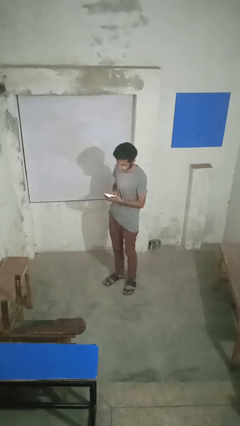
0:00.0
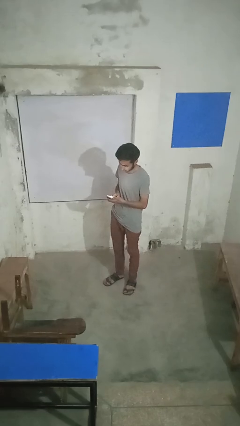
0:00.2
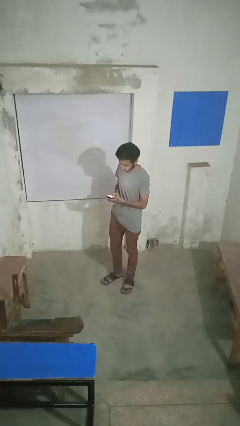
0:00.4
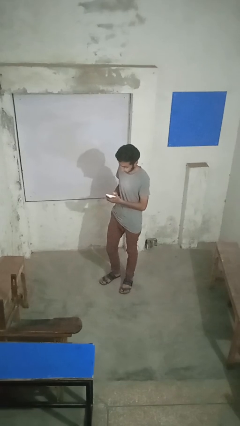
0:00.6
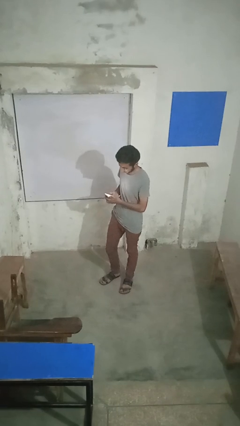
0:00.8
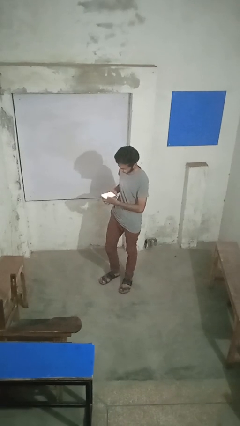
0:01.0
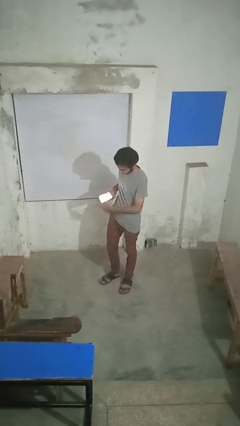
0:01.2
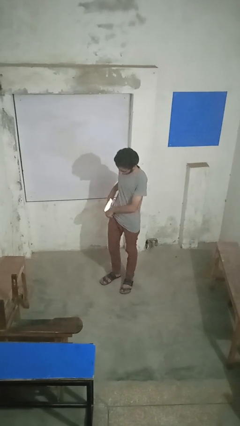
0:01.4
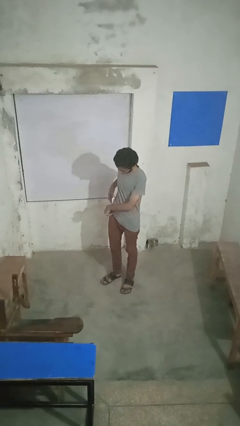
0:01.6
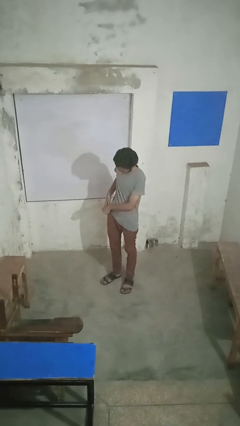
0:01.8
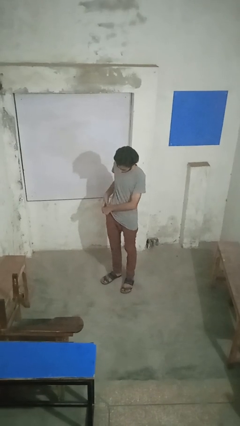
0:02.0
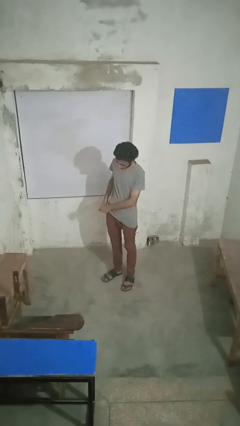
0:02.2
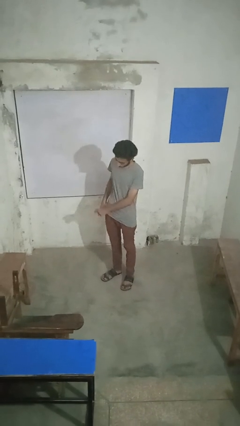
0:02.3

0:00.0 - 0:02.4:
person puts phone into pocket

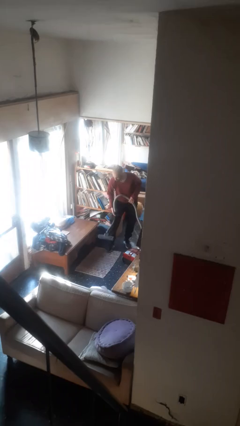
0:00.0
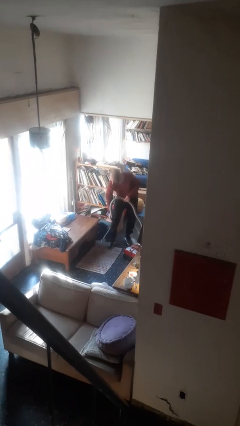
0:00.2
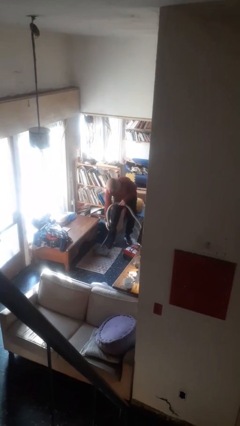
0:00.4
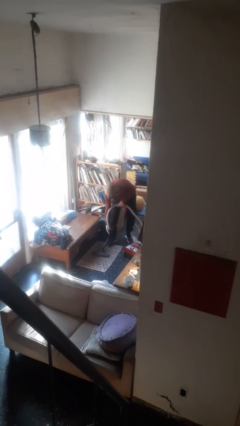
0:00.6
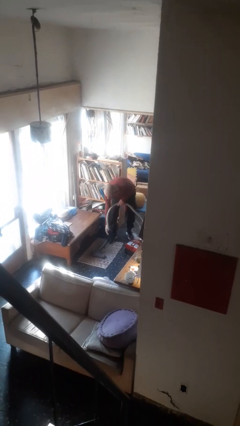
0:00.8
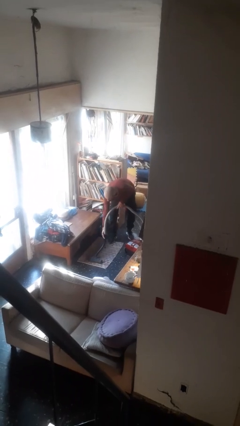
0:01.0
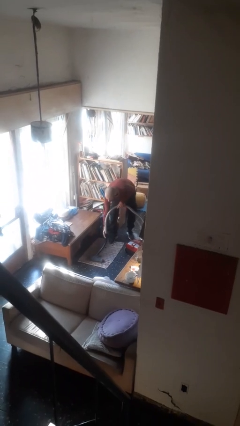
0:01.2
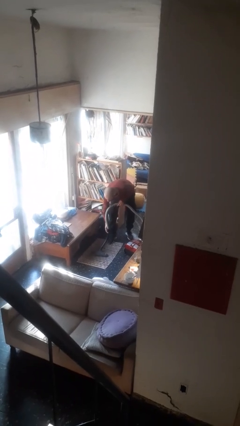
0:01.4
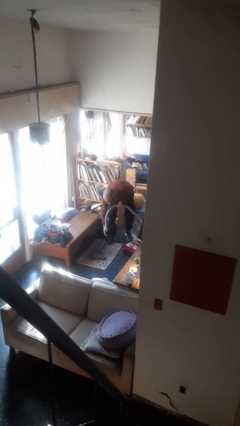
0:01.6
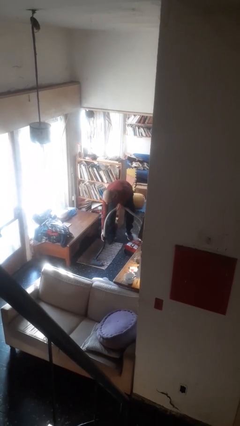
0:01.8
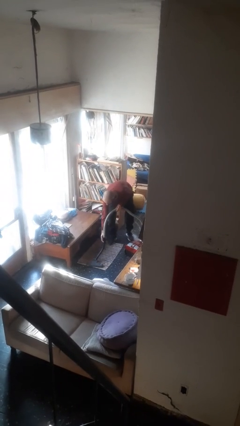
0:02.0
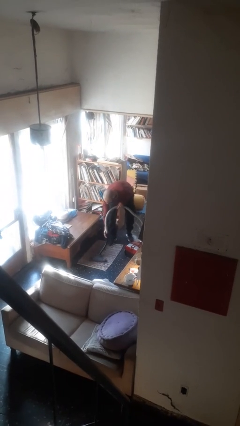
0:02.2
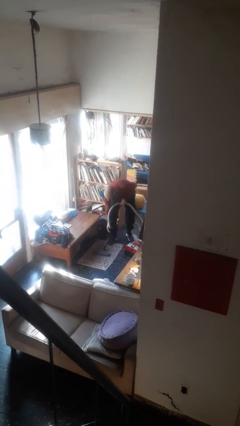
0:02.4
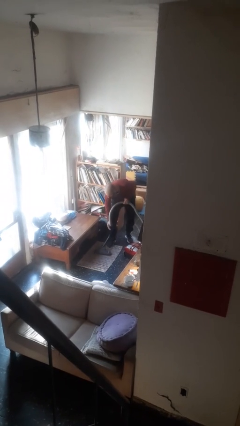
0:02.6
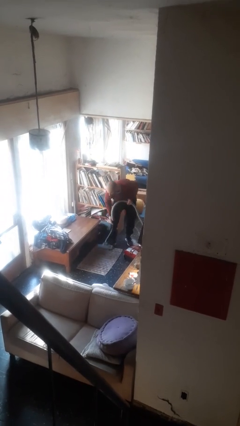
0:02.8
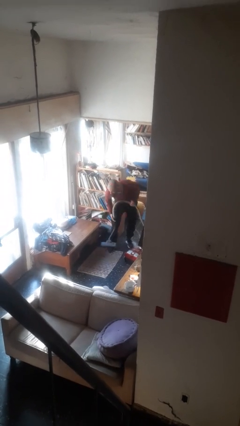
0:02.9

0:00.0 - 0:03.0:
person vacuums carpet

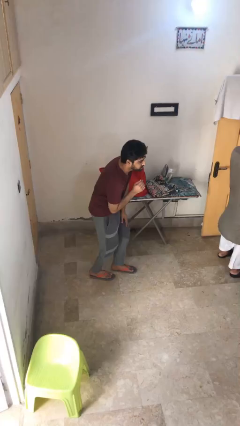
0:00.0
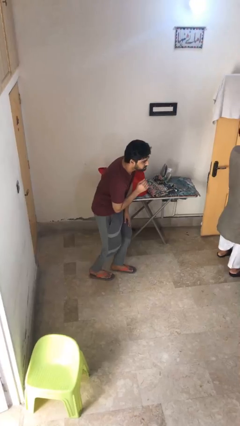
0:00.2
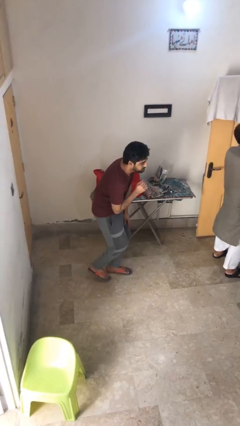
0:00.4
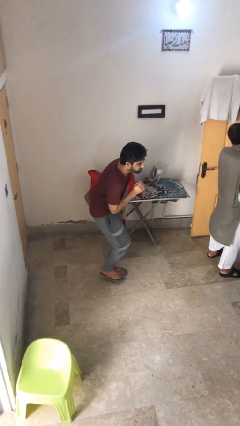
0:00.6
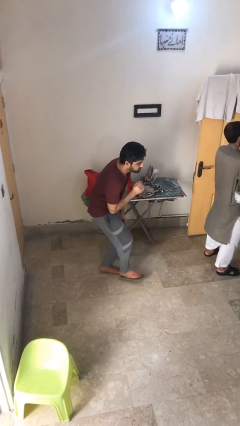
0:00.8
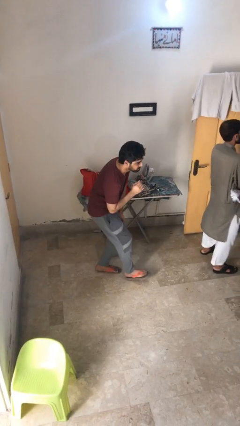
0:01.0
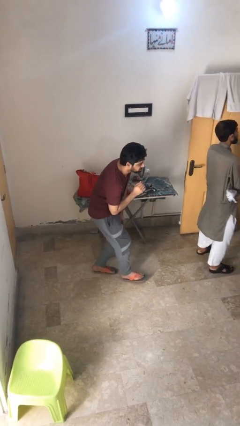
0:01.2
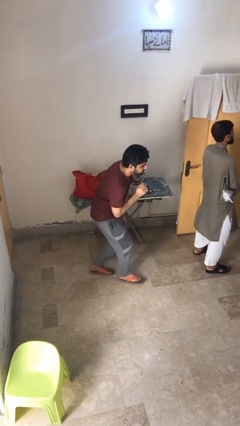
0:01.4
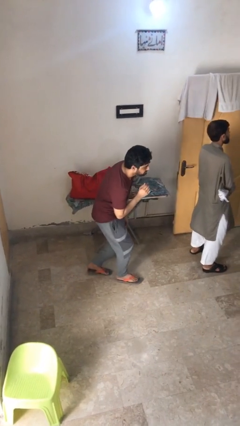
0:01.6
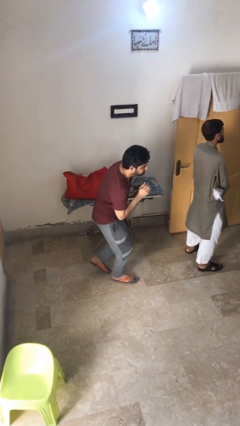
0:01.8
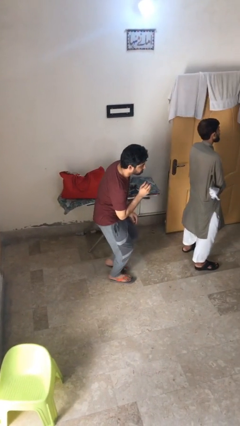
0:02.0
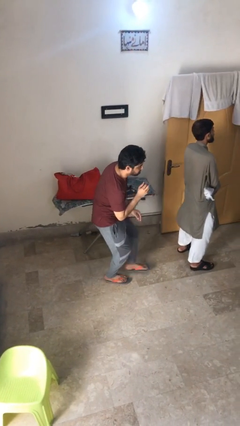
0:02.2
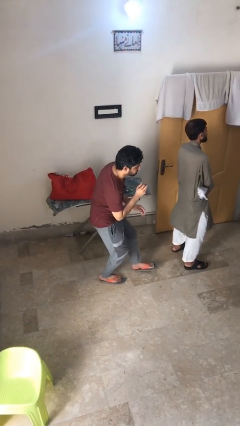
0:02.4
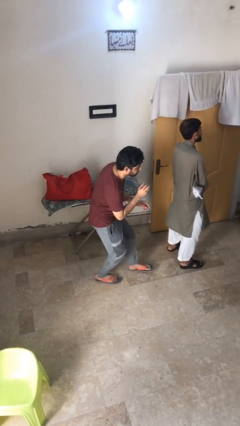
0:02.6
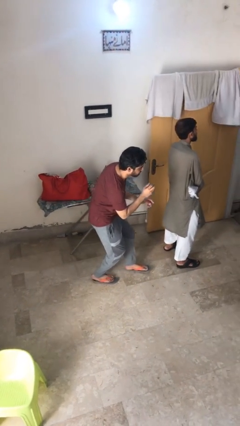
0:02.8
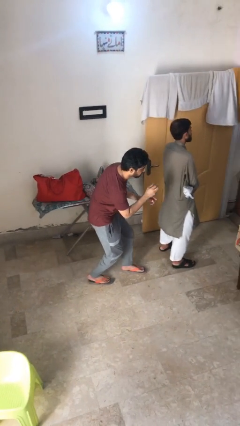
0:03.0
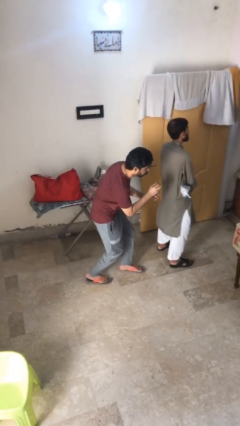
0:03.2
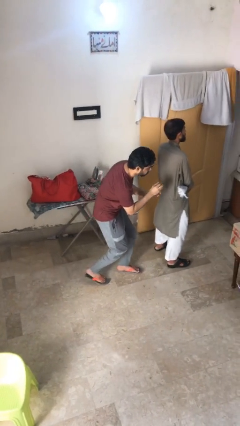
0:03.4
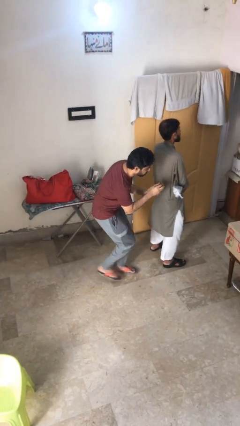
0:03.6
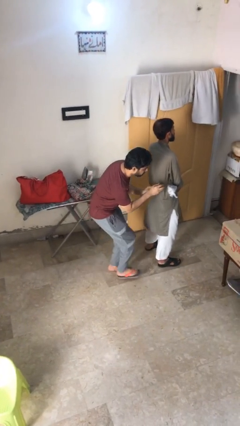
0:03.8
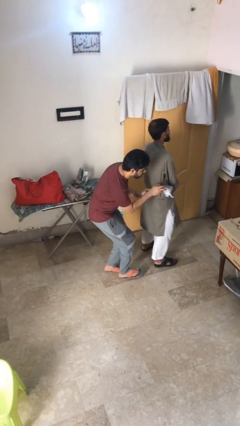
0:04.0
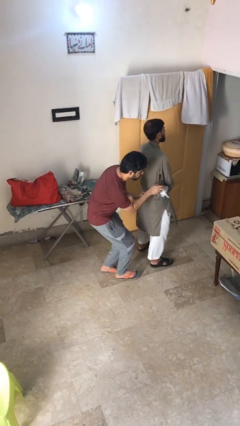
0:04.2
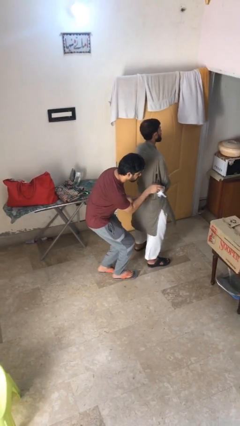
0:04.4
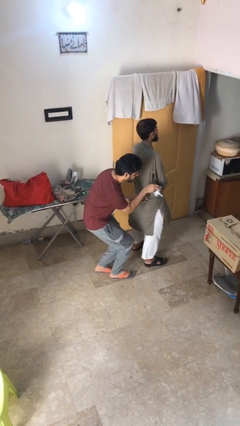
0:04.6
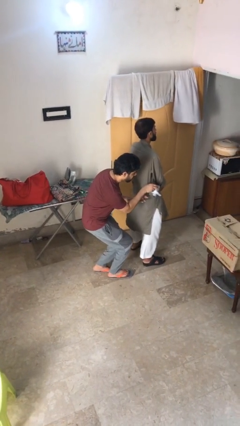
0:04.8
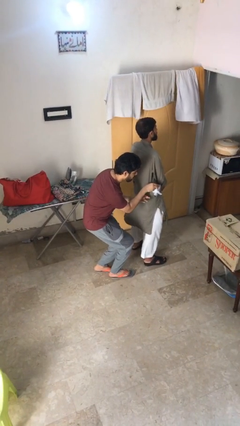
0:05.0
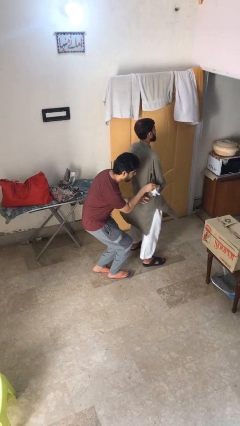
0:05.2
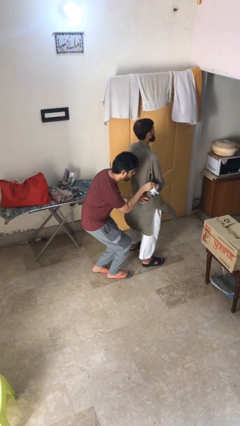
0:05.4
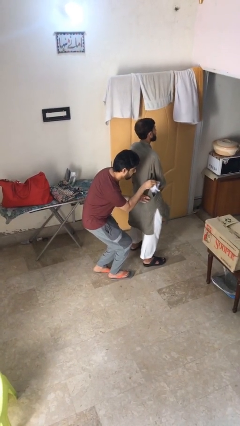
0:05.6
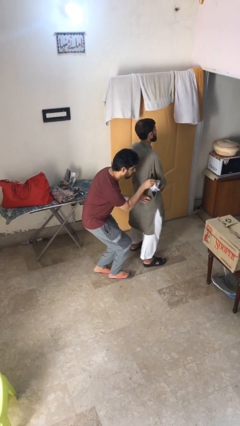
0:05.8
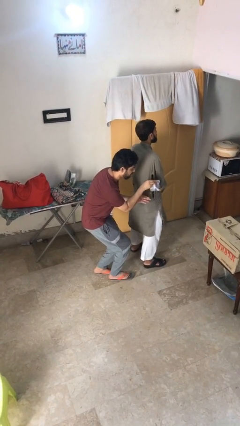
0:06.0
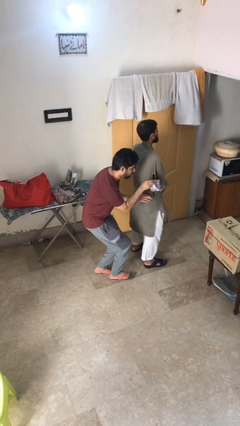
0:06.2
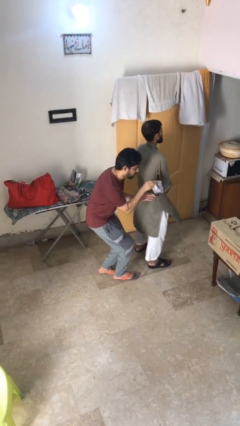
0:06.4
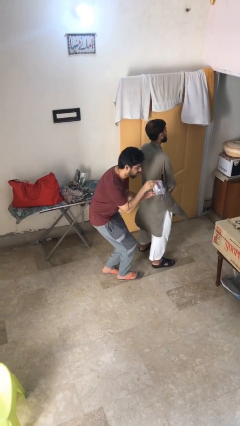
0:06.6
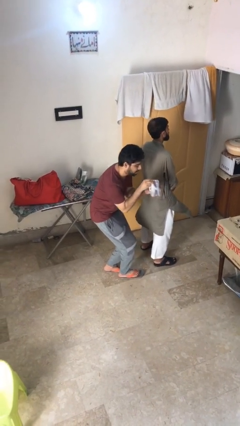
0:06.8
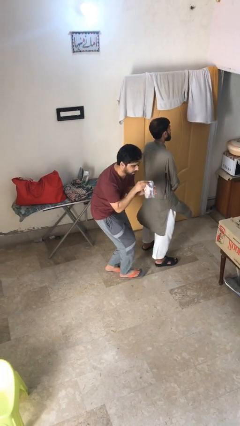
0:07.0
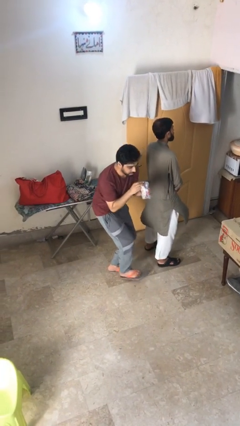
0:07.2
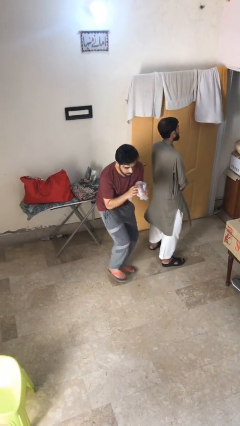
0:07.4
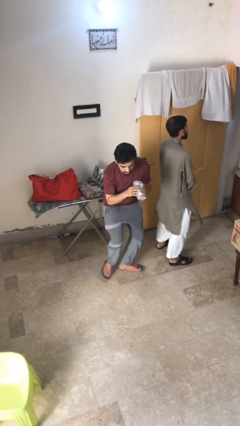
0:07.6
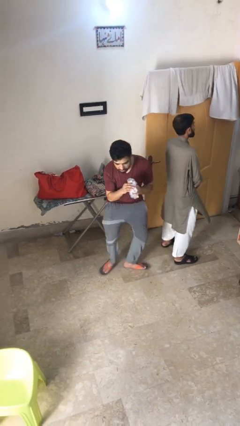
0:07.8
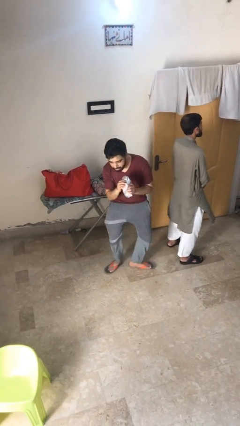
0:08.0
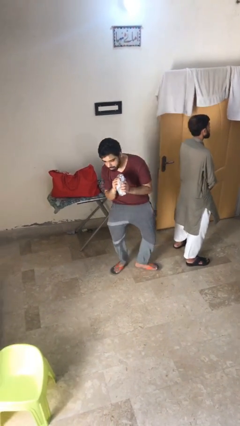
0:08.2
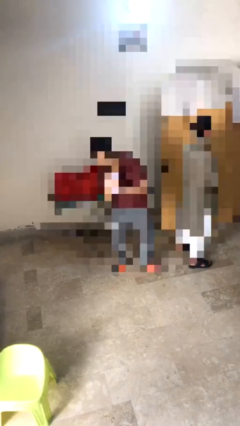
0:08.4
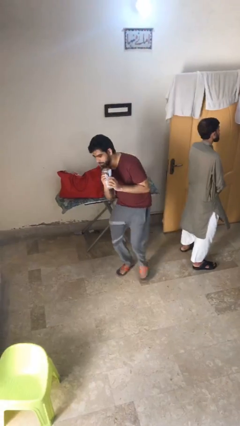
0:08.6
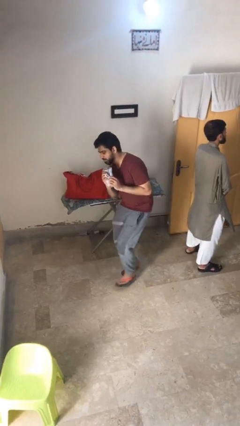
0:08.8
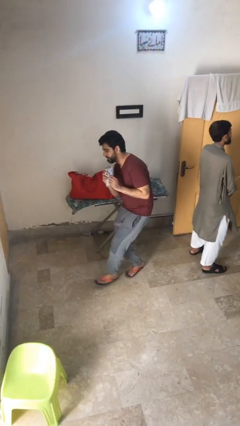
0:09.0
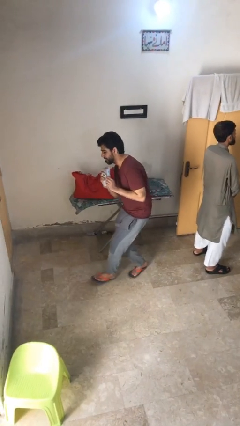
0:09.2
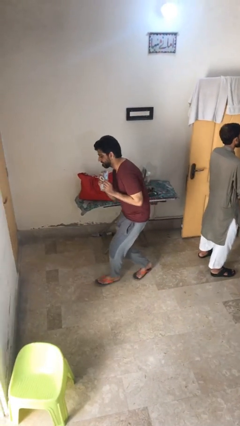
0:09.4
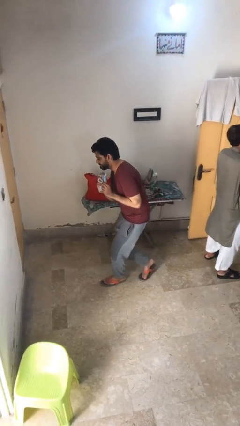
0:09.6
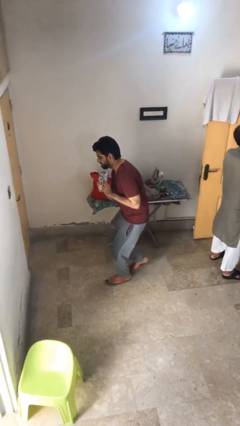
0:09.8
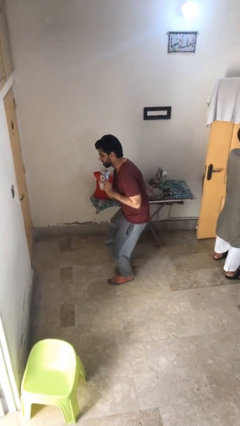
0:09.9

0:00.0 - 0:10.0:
person steals object from person

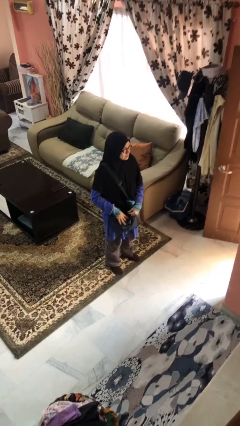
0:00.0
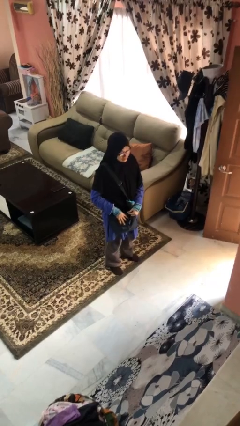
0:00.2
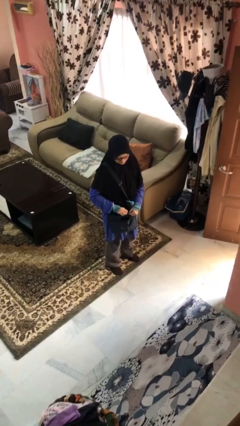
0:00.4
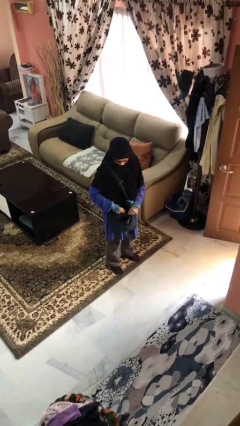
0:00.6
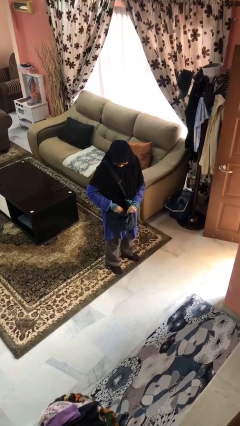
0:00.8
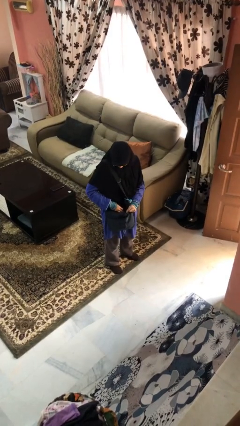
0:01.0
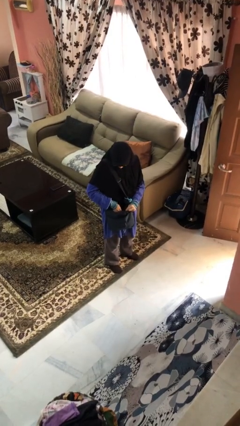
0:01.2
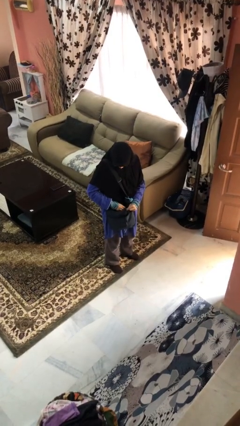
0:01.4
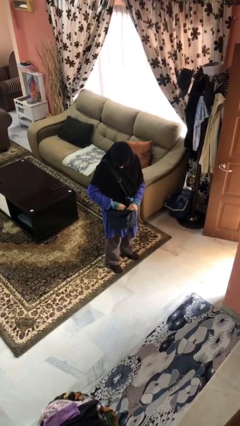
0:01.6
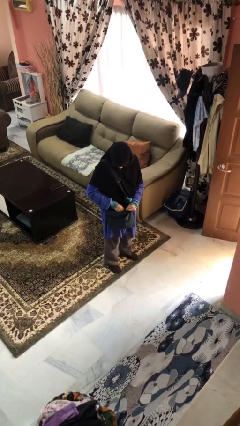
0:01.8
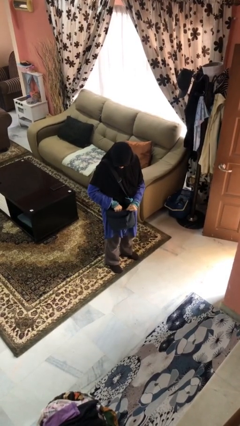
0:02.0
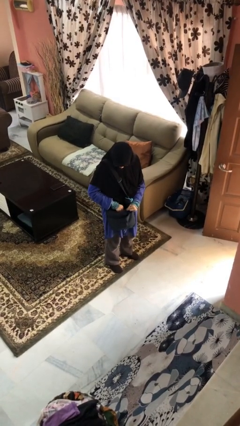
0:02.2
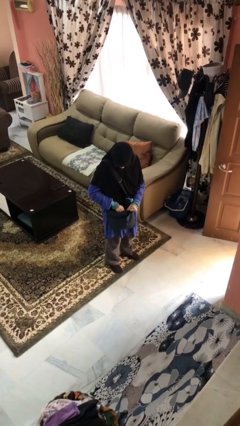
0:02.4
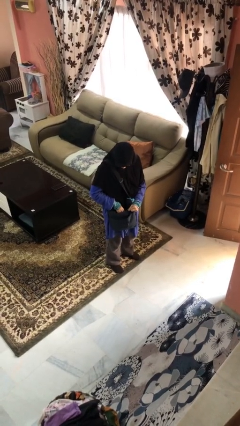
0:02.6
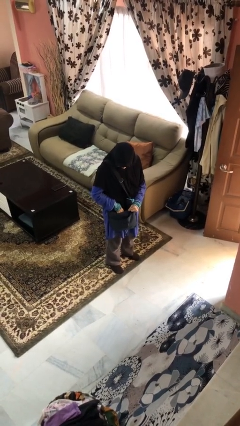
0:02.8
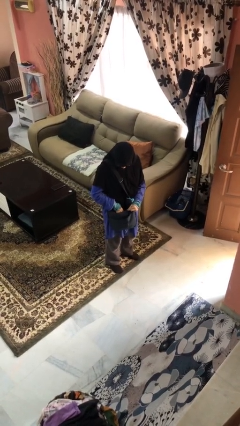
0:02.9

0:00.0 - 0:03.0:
person searches in purse
